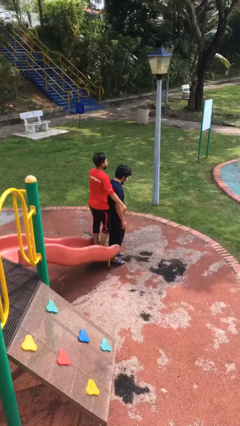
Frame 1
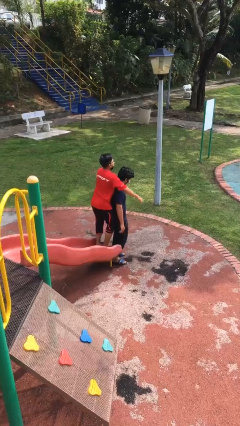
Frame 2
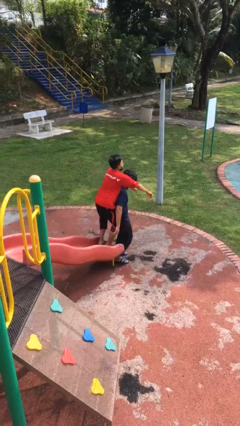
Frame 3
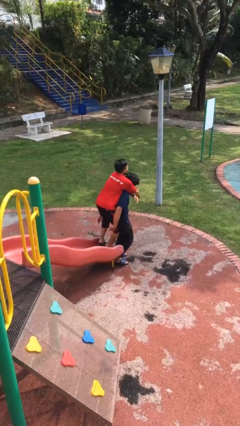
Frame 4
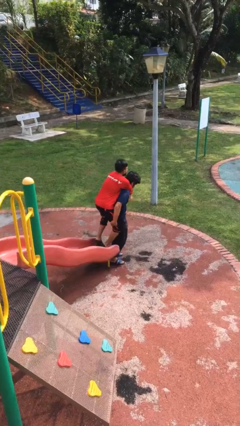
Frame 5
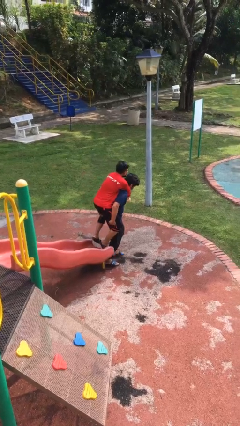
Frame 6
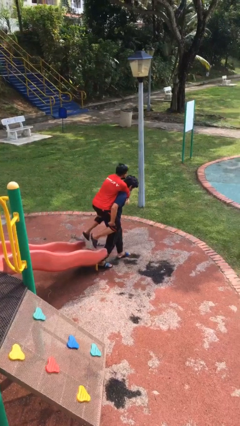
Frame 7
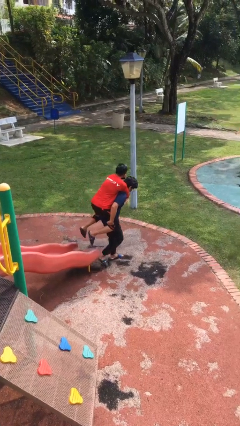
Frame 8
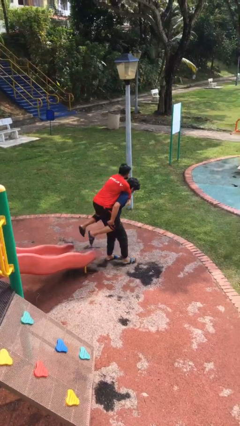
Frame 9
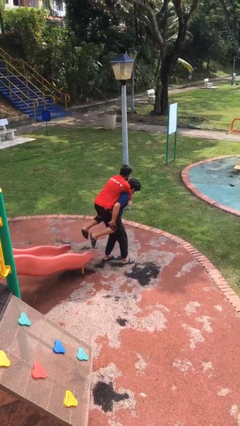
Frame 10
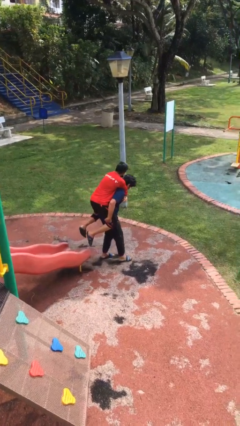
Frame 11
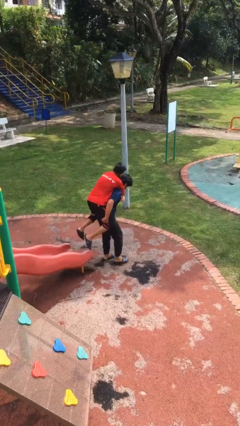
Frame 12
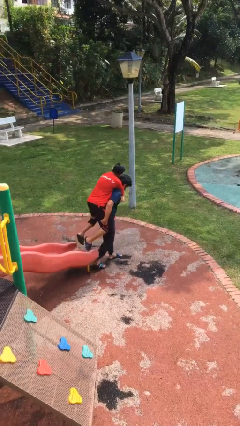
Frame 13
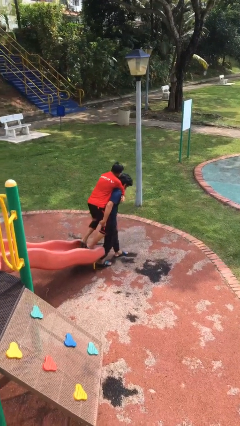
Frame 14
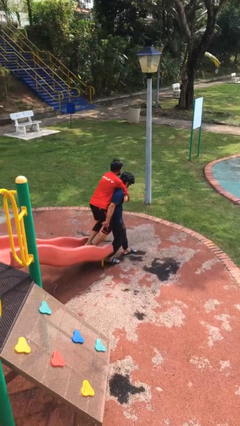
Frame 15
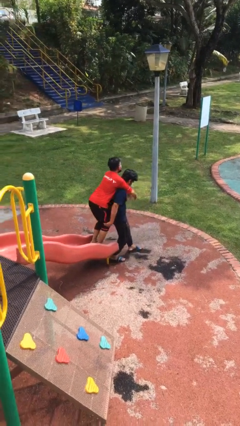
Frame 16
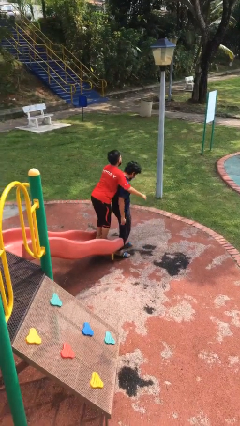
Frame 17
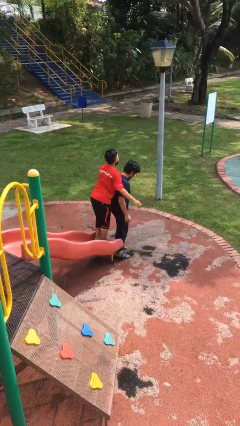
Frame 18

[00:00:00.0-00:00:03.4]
person carries person on back

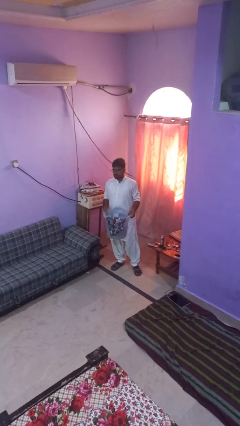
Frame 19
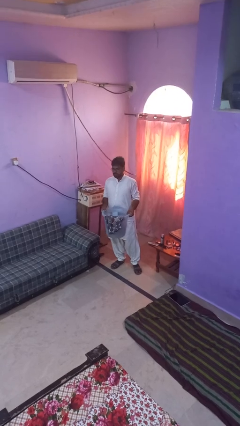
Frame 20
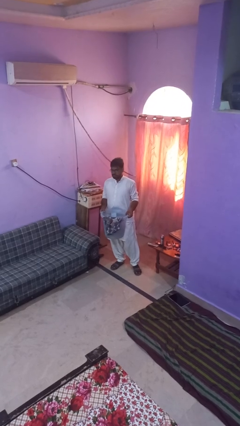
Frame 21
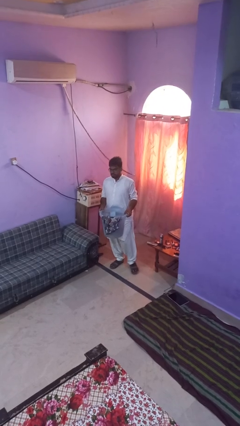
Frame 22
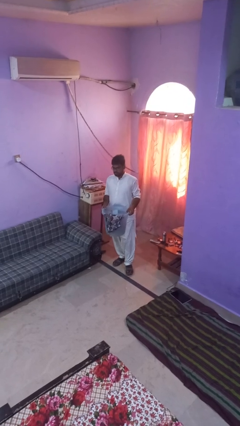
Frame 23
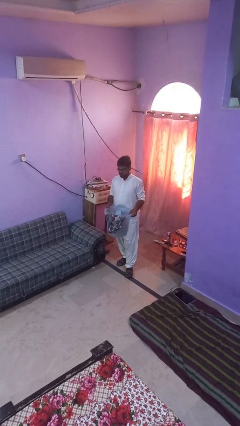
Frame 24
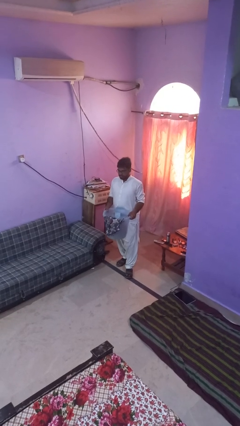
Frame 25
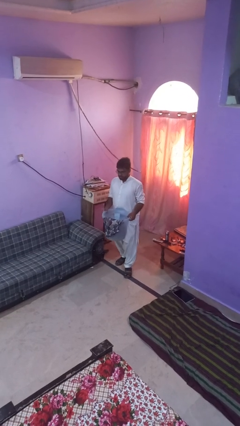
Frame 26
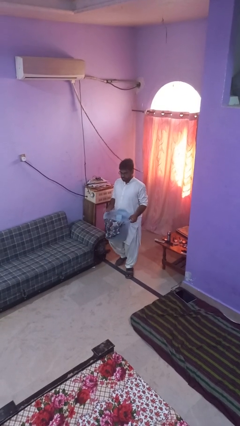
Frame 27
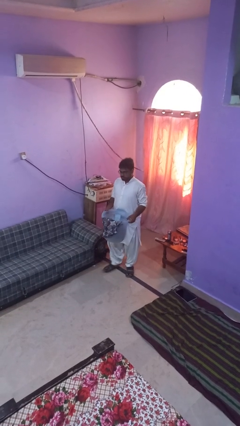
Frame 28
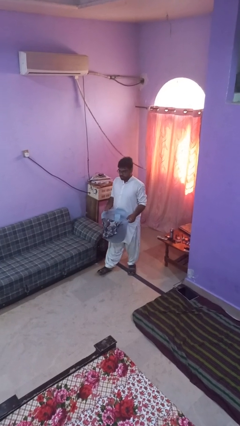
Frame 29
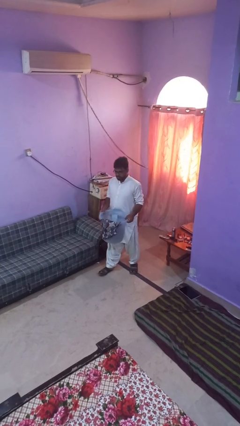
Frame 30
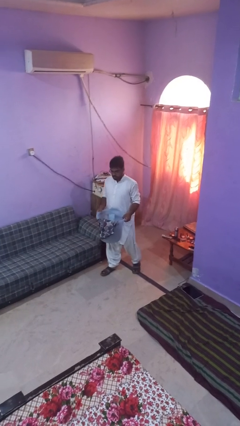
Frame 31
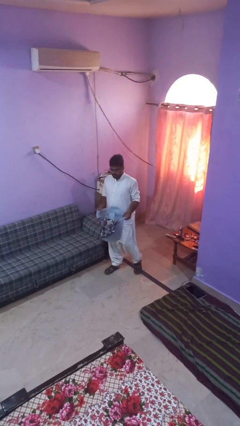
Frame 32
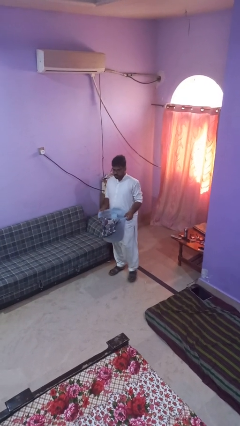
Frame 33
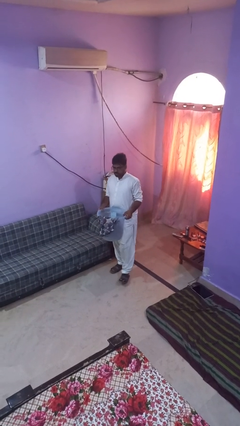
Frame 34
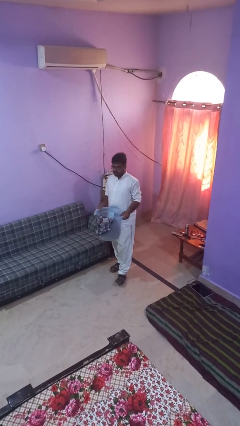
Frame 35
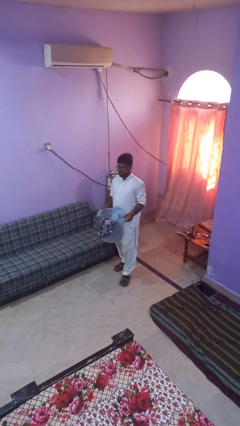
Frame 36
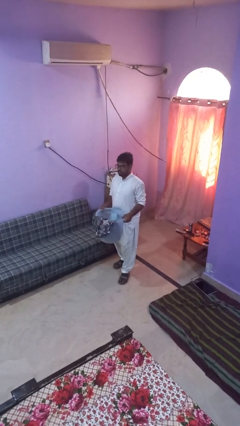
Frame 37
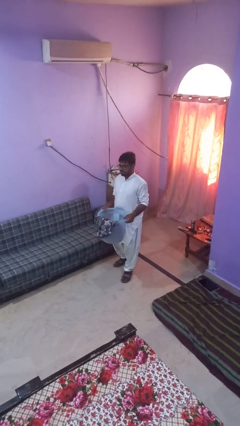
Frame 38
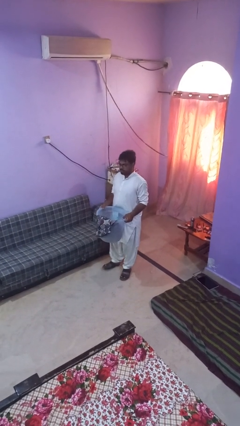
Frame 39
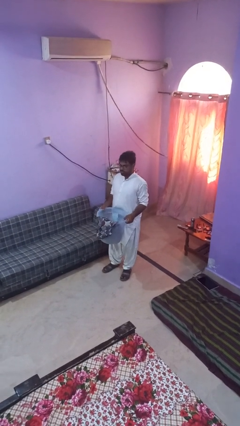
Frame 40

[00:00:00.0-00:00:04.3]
person carries laundry basket

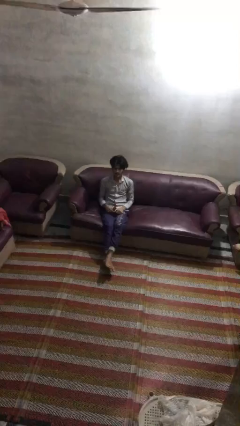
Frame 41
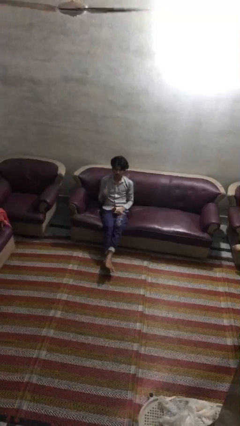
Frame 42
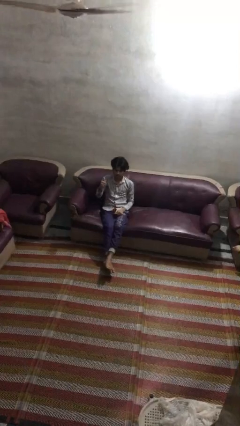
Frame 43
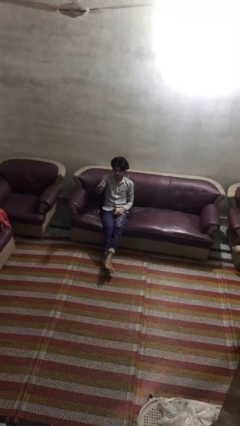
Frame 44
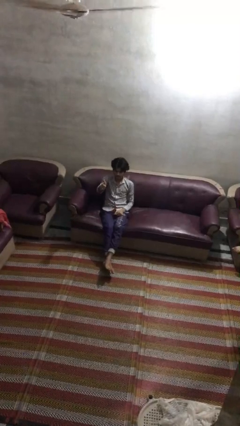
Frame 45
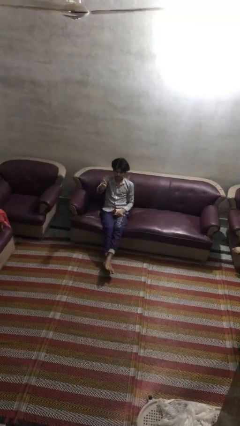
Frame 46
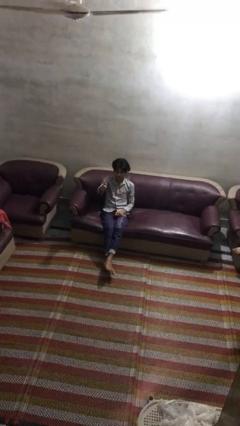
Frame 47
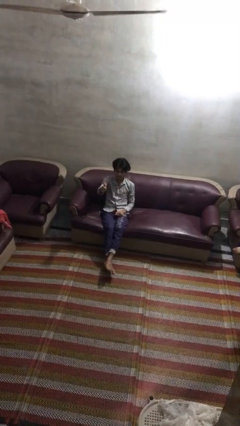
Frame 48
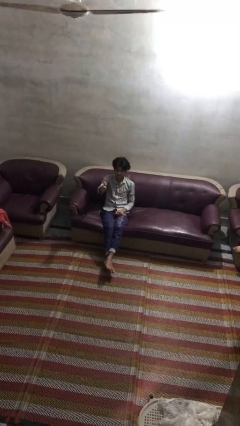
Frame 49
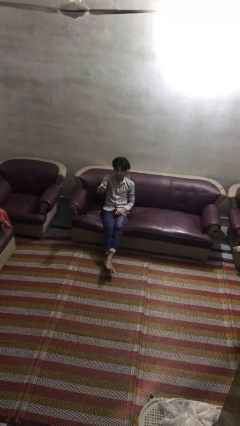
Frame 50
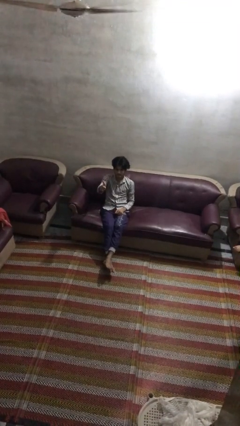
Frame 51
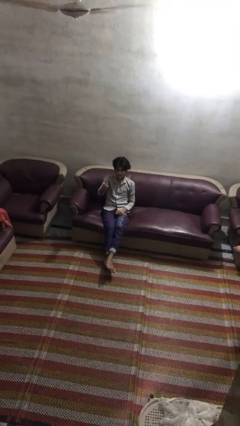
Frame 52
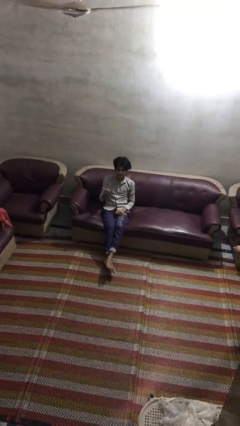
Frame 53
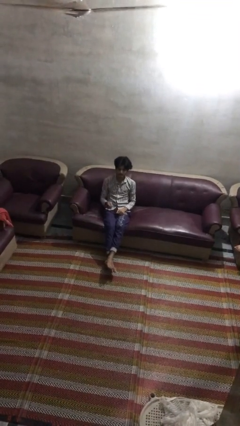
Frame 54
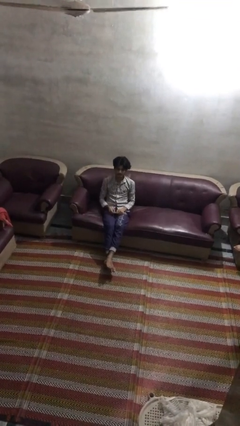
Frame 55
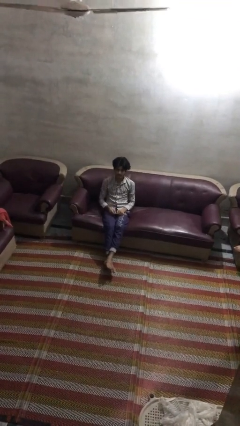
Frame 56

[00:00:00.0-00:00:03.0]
person gestures thumbs up

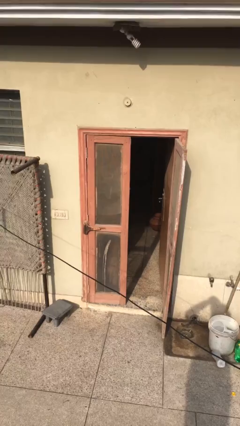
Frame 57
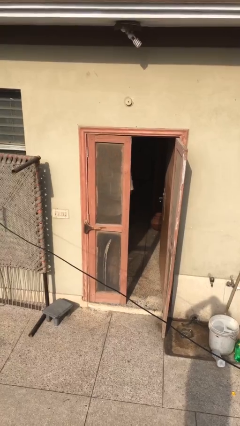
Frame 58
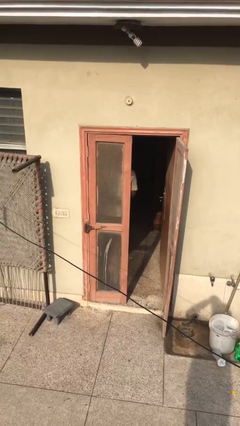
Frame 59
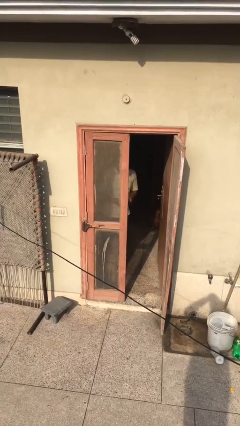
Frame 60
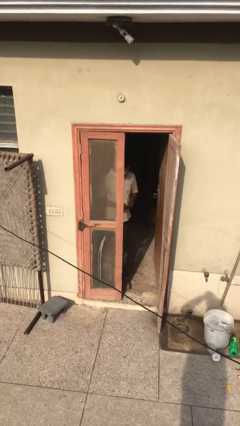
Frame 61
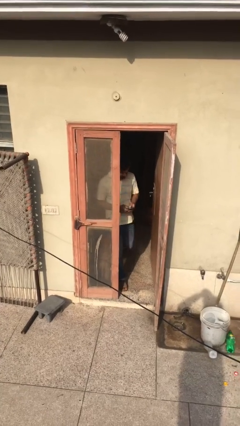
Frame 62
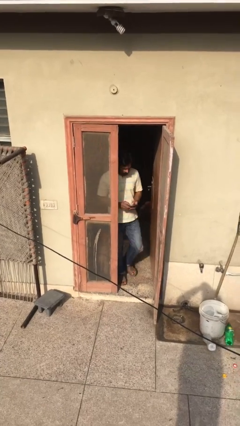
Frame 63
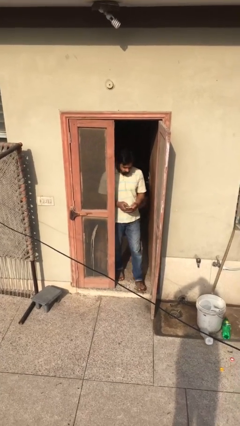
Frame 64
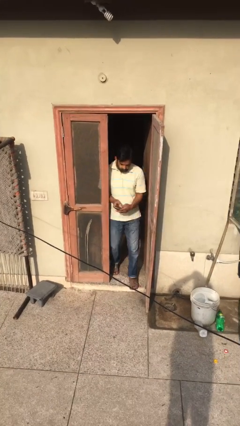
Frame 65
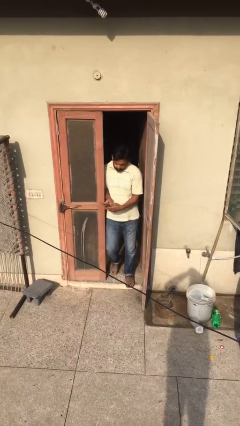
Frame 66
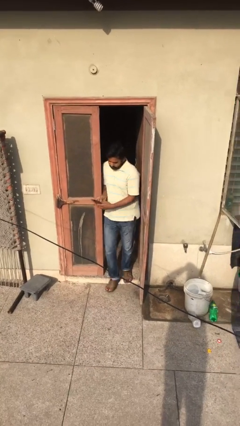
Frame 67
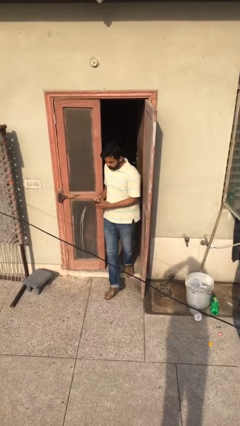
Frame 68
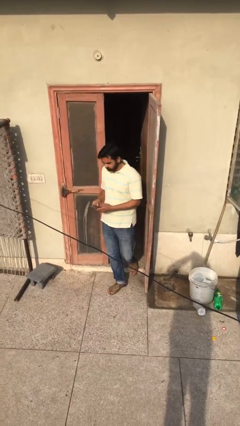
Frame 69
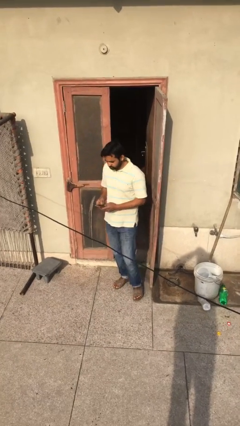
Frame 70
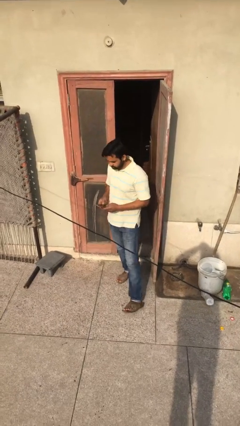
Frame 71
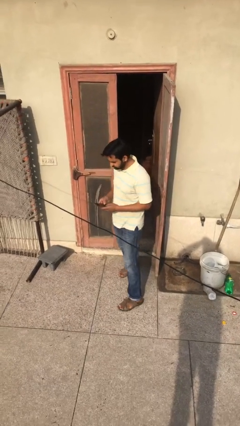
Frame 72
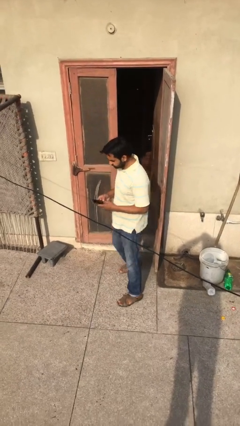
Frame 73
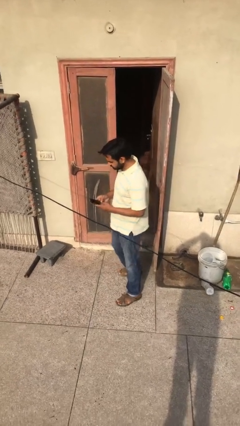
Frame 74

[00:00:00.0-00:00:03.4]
person enters scene through structure

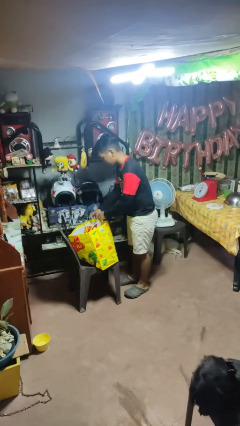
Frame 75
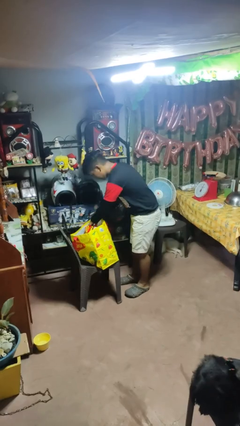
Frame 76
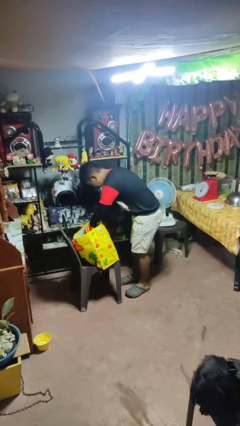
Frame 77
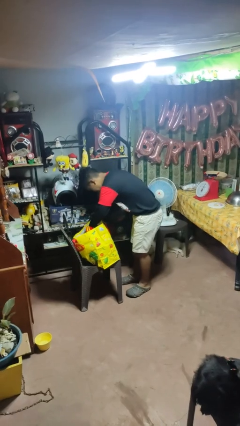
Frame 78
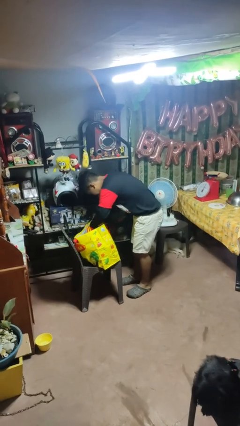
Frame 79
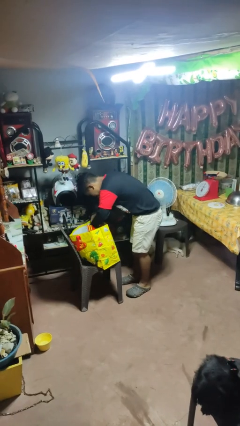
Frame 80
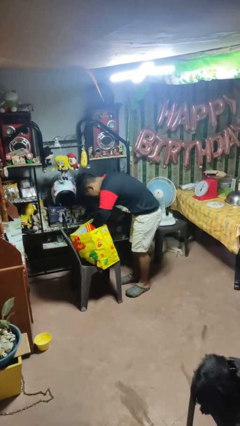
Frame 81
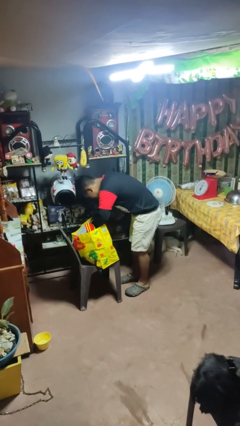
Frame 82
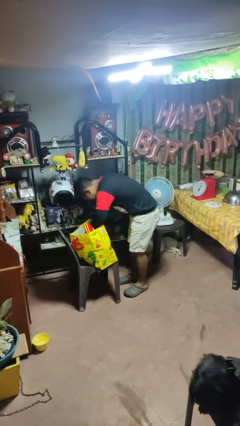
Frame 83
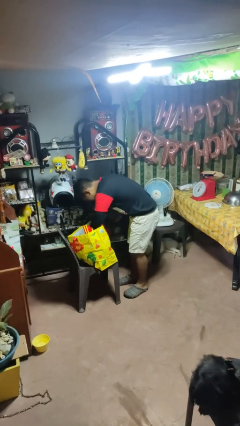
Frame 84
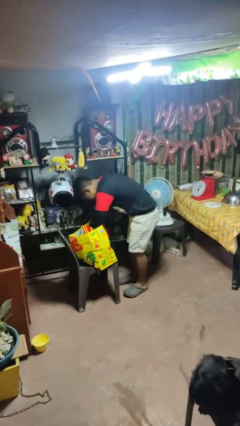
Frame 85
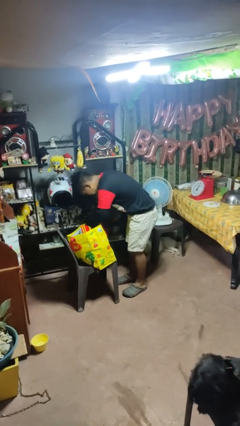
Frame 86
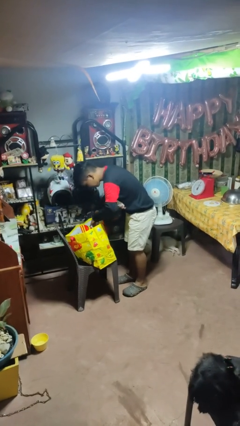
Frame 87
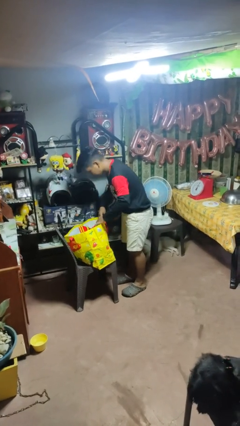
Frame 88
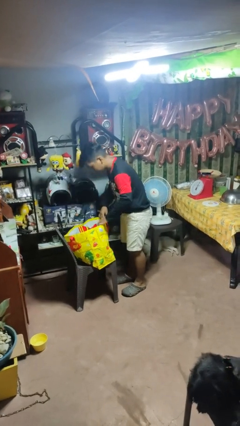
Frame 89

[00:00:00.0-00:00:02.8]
person searches in bag

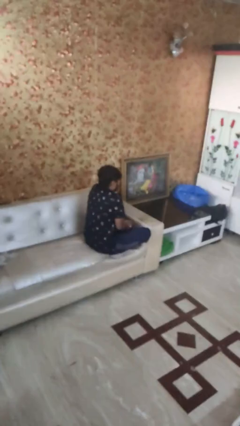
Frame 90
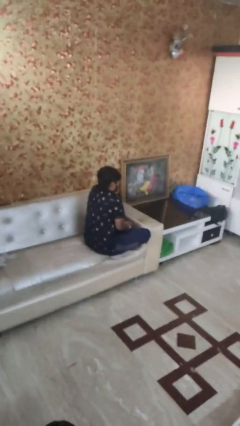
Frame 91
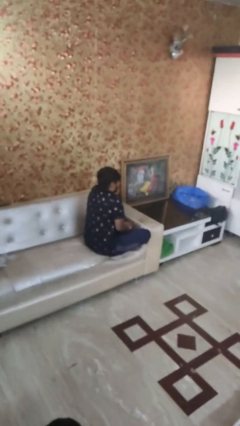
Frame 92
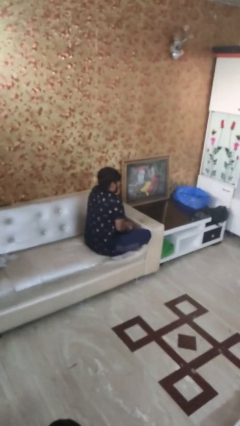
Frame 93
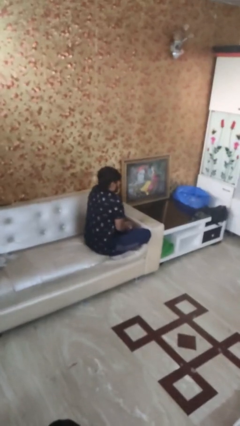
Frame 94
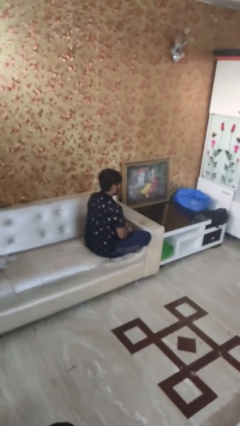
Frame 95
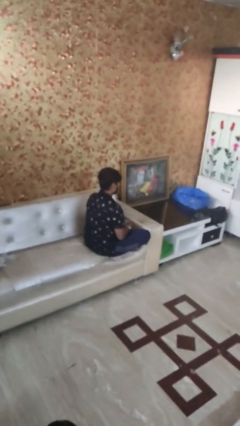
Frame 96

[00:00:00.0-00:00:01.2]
person shrugs
